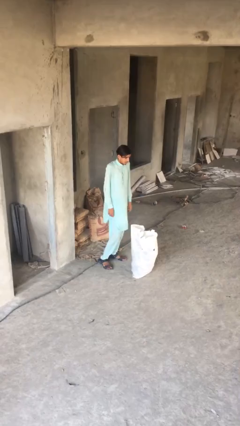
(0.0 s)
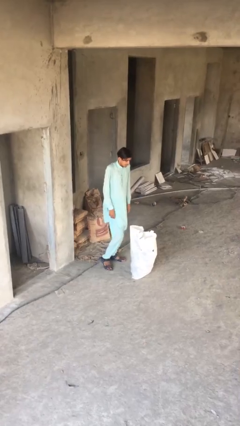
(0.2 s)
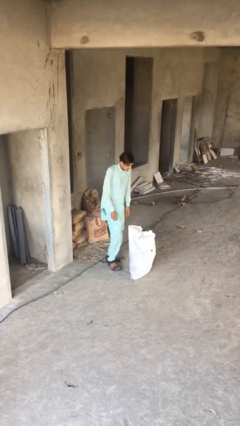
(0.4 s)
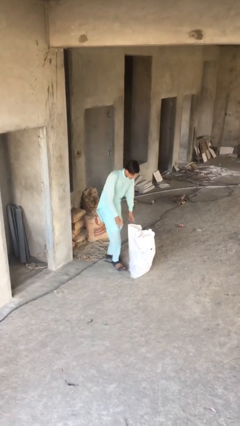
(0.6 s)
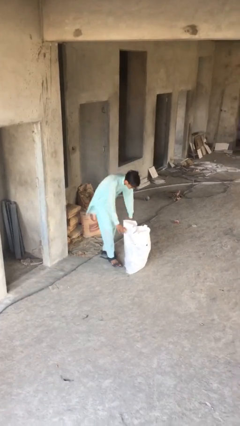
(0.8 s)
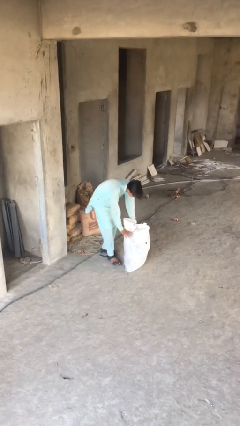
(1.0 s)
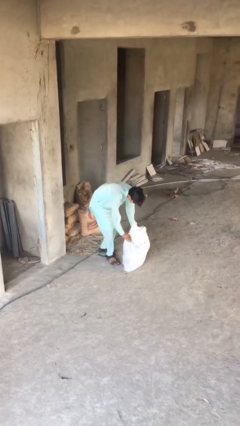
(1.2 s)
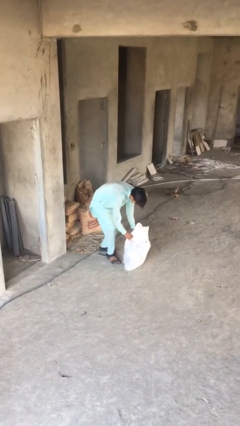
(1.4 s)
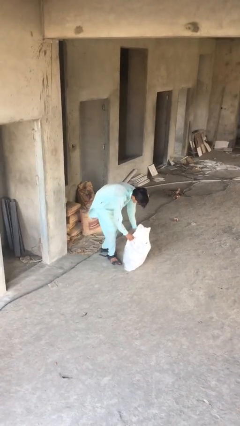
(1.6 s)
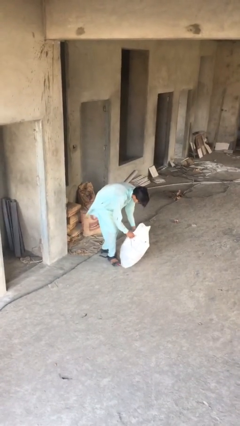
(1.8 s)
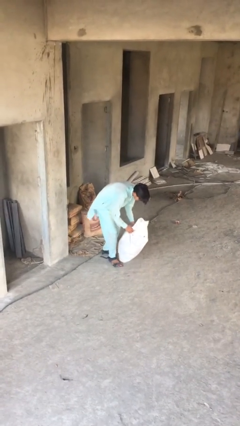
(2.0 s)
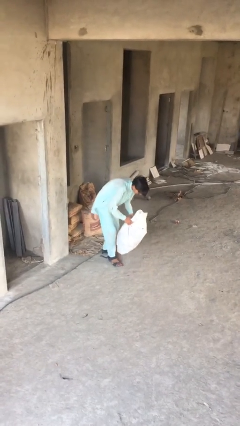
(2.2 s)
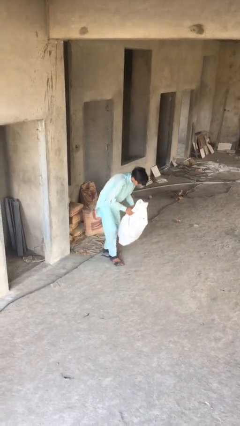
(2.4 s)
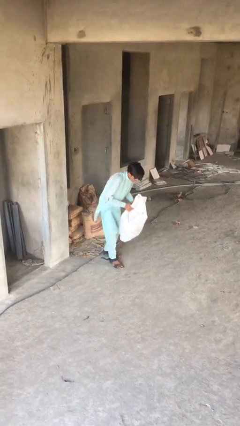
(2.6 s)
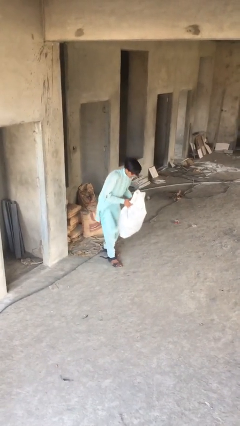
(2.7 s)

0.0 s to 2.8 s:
person picks up object from floor

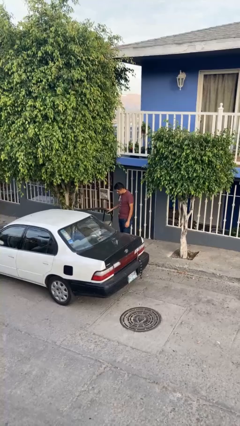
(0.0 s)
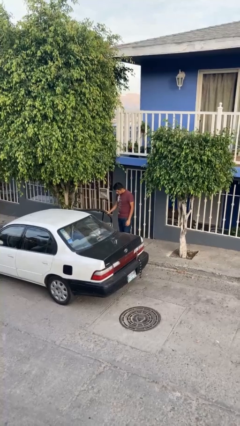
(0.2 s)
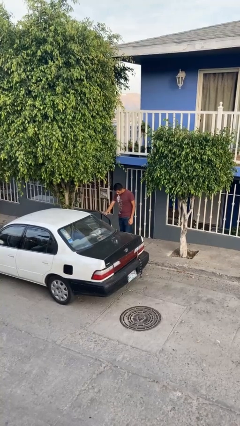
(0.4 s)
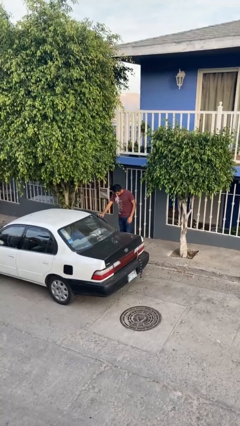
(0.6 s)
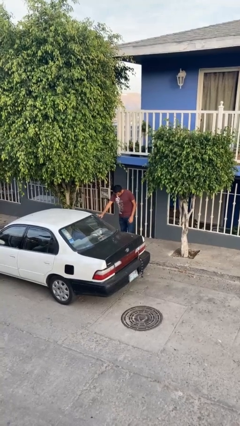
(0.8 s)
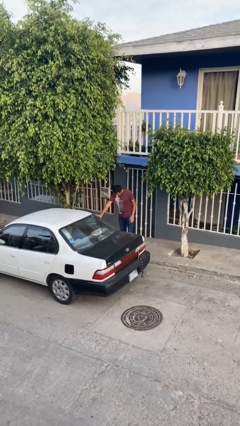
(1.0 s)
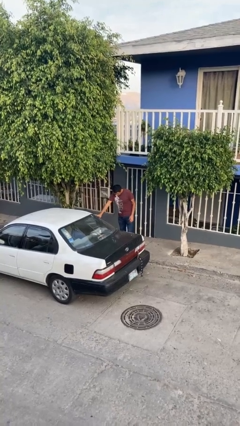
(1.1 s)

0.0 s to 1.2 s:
person closes car door

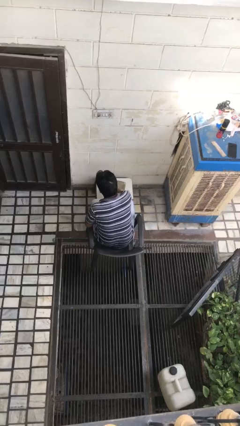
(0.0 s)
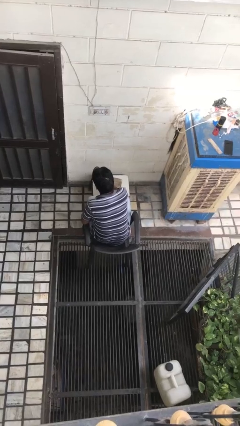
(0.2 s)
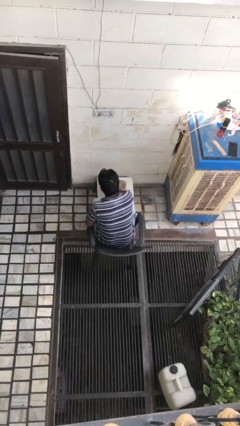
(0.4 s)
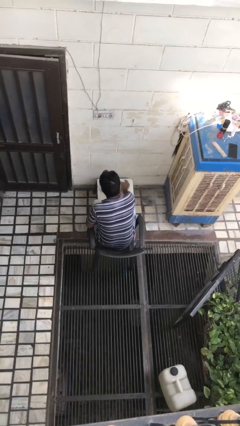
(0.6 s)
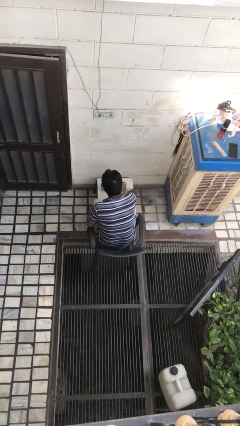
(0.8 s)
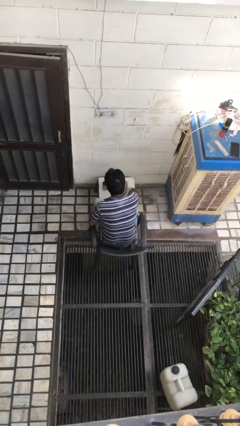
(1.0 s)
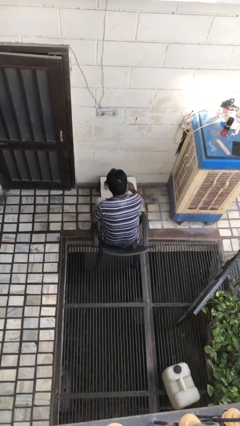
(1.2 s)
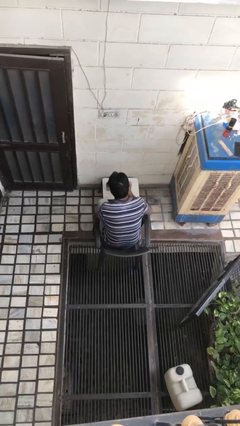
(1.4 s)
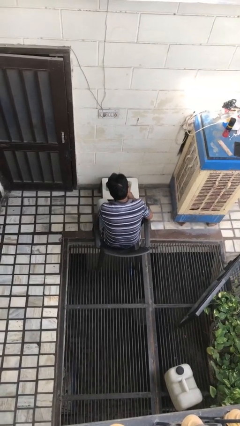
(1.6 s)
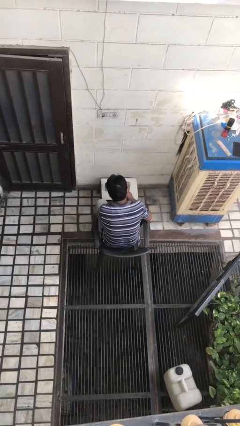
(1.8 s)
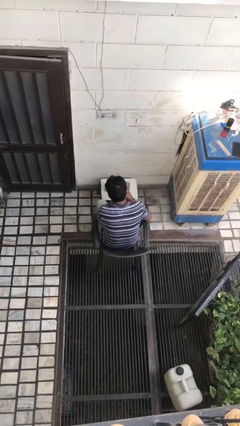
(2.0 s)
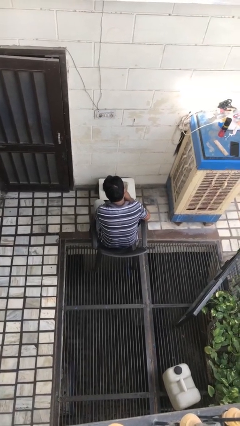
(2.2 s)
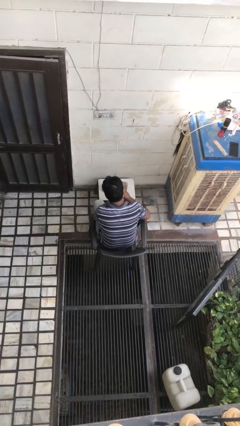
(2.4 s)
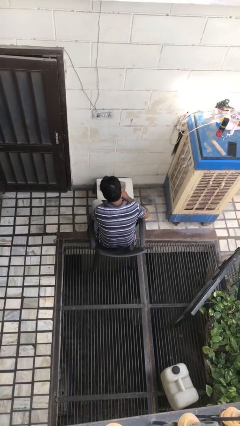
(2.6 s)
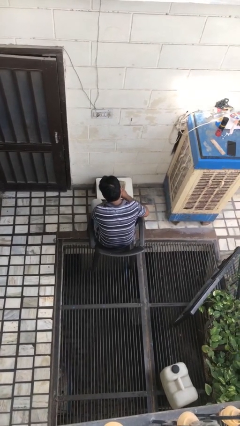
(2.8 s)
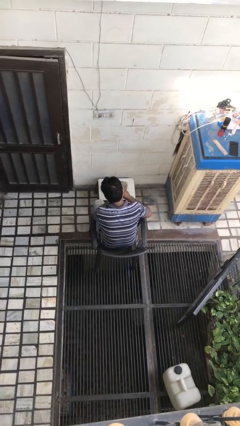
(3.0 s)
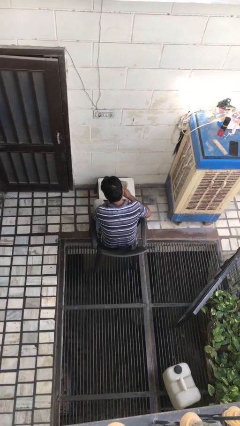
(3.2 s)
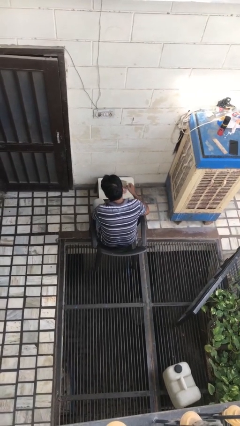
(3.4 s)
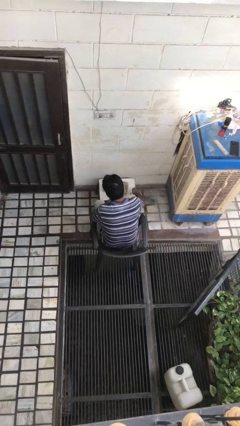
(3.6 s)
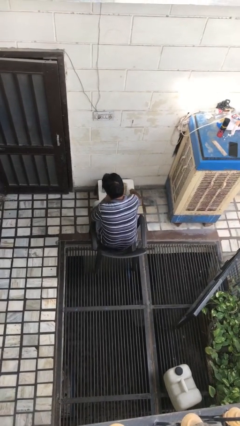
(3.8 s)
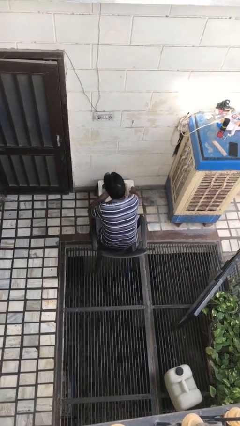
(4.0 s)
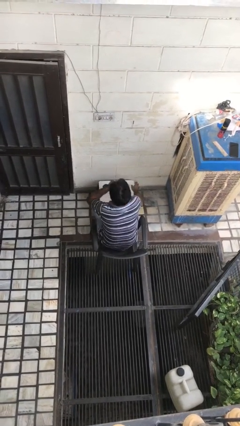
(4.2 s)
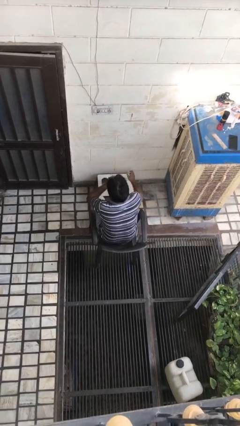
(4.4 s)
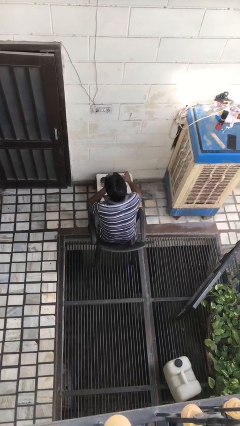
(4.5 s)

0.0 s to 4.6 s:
person takes medicine pills

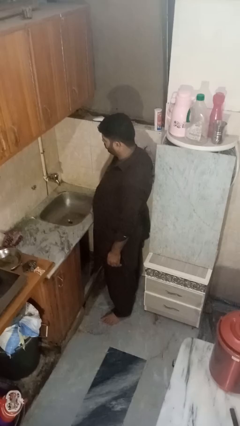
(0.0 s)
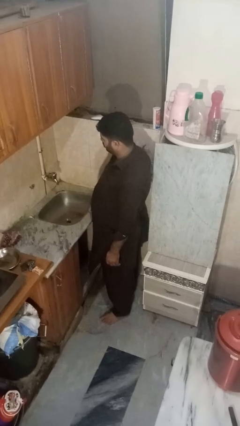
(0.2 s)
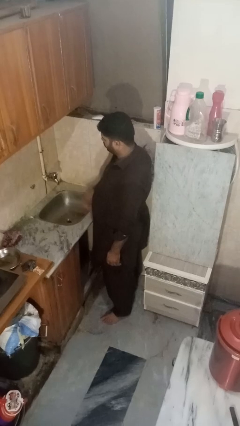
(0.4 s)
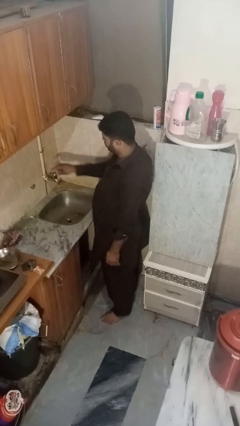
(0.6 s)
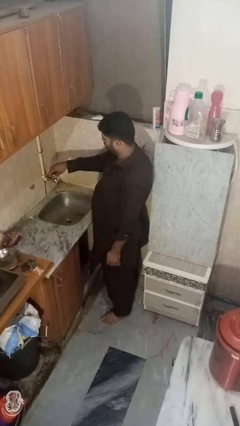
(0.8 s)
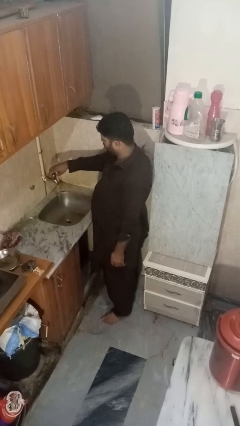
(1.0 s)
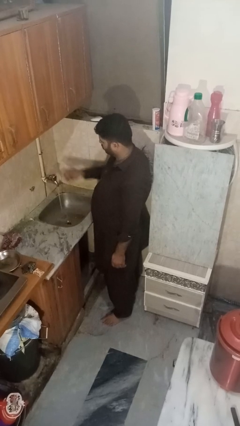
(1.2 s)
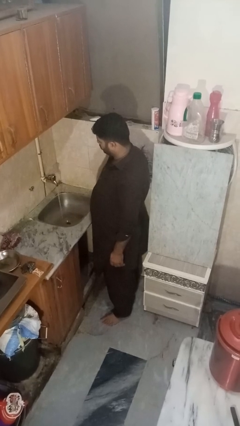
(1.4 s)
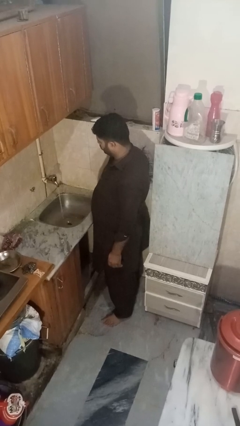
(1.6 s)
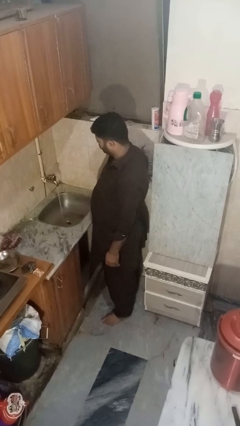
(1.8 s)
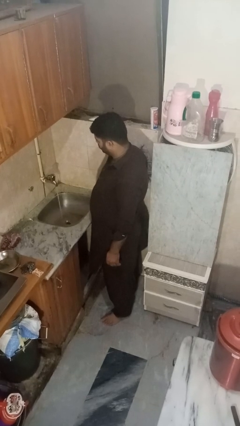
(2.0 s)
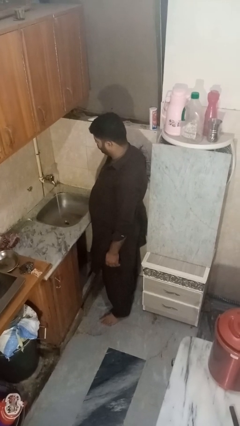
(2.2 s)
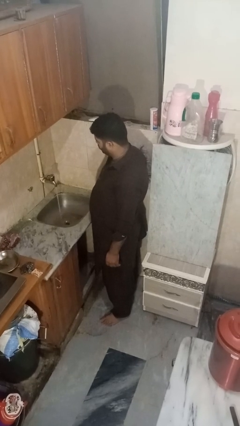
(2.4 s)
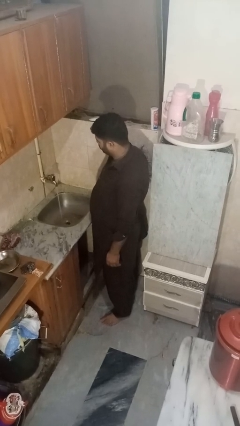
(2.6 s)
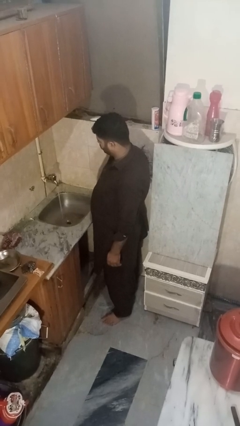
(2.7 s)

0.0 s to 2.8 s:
person turns on faucet

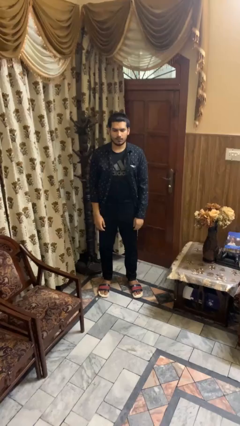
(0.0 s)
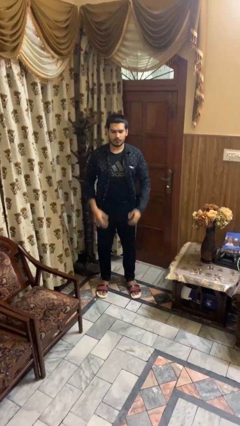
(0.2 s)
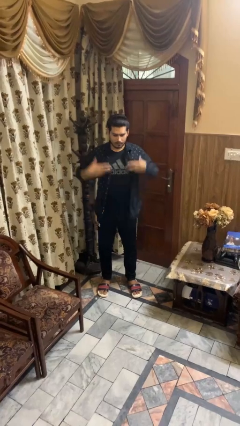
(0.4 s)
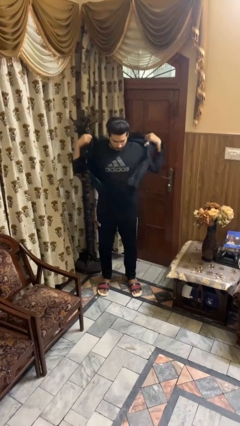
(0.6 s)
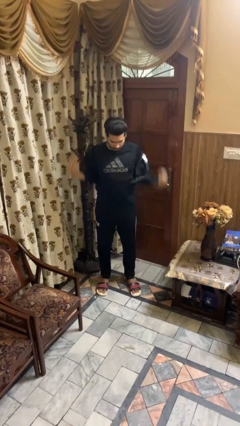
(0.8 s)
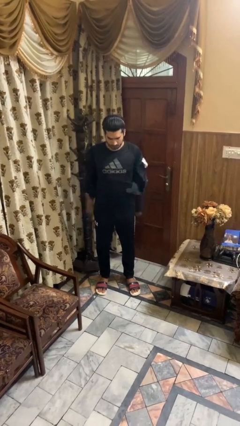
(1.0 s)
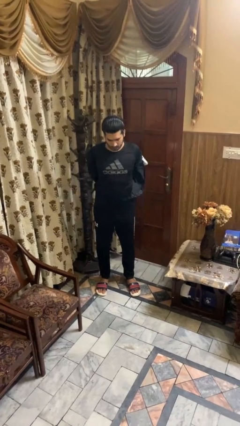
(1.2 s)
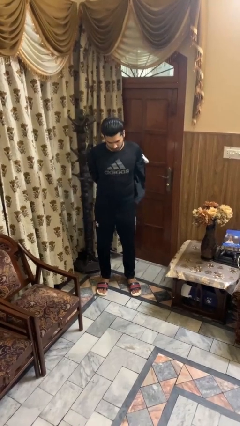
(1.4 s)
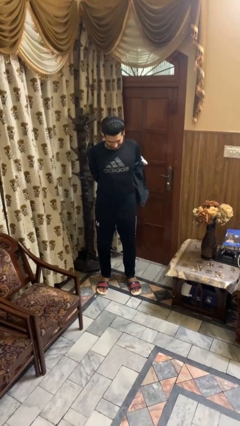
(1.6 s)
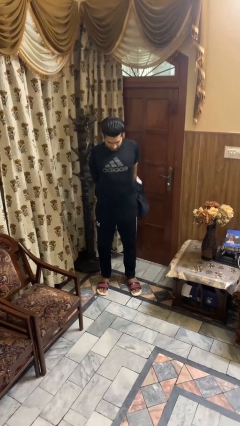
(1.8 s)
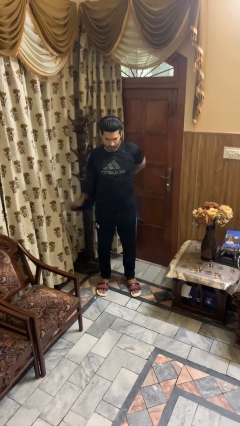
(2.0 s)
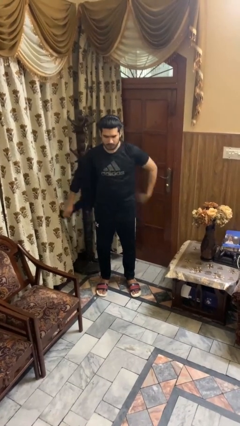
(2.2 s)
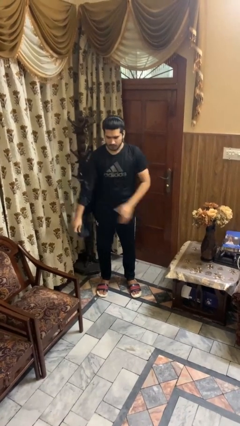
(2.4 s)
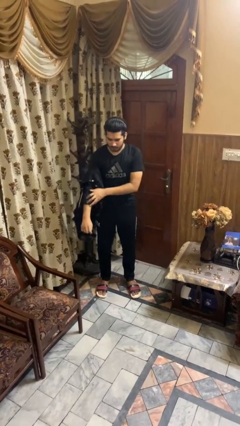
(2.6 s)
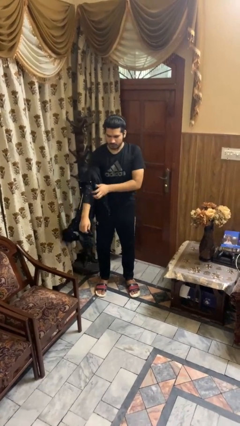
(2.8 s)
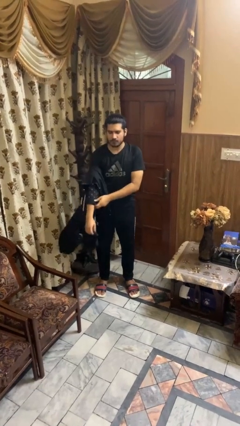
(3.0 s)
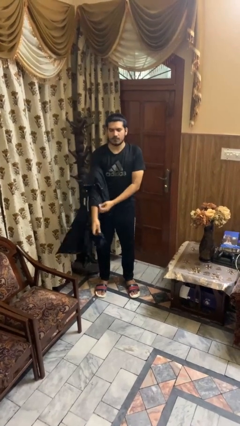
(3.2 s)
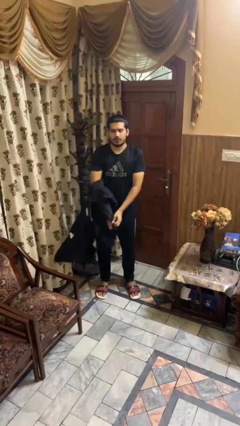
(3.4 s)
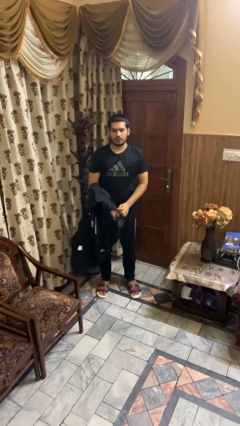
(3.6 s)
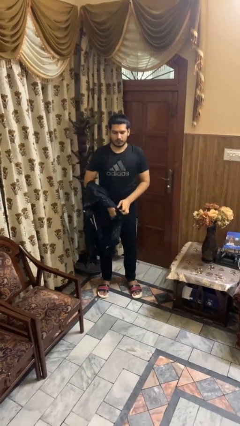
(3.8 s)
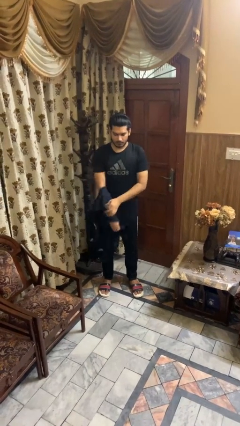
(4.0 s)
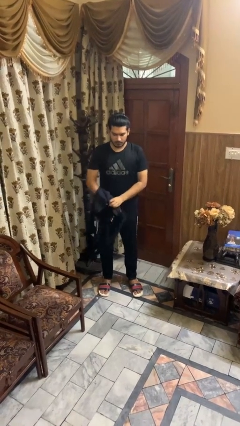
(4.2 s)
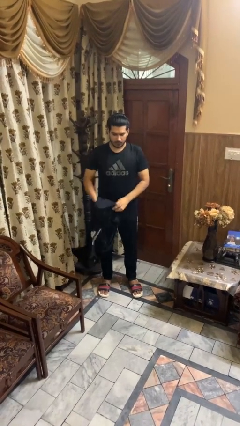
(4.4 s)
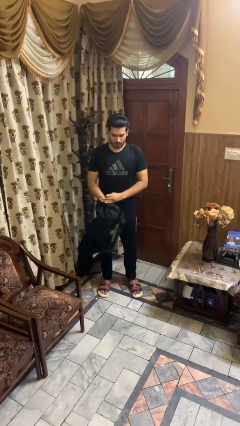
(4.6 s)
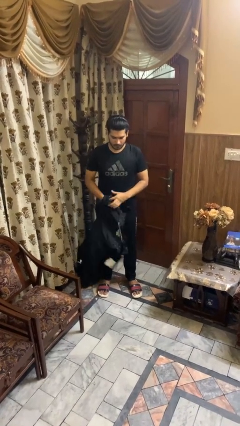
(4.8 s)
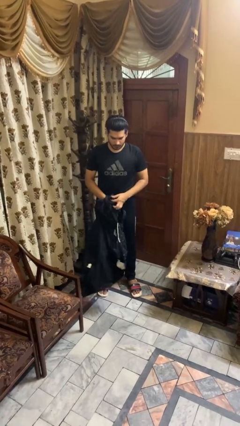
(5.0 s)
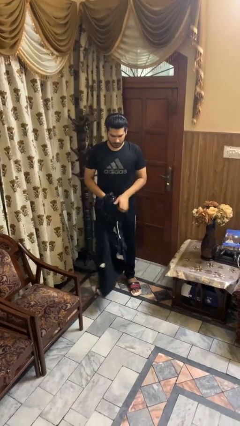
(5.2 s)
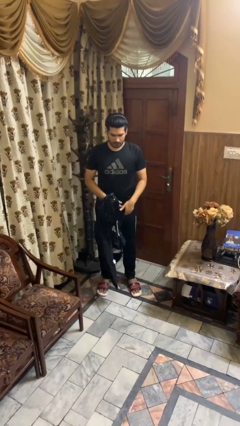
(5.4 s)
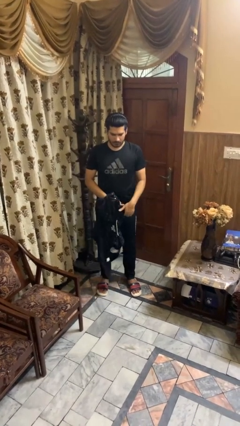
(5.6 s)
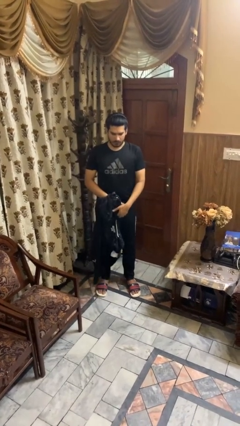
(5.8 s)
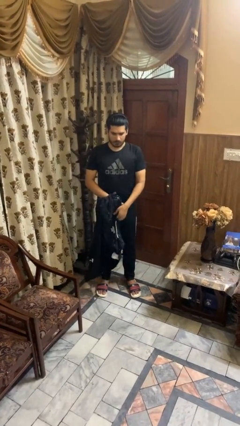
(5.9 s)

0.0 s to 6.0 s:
person takes off shirt

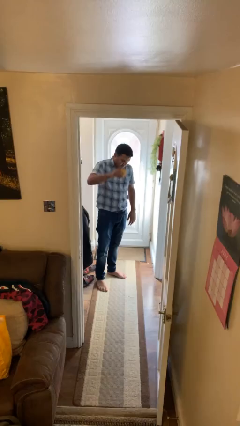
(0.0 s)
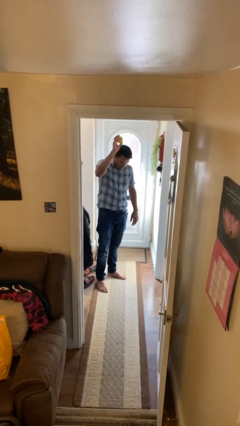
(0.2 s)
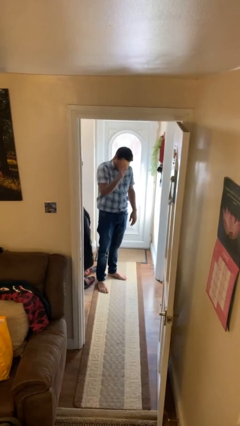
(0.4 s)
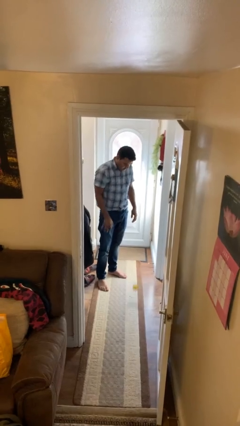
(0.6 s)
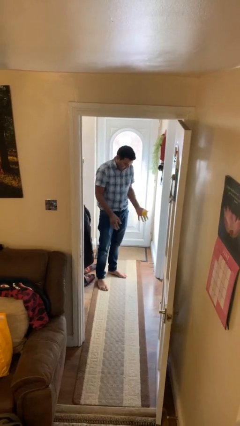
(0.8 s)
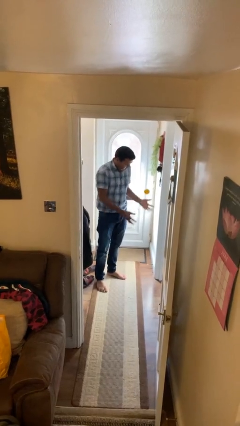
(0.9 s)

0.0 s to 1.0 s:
person bounces ball on floor
